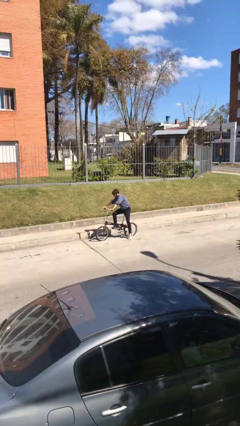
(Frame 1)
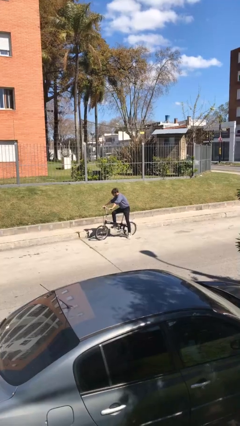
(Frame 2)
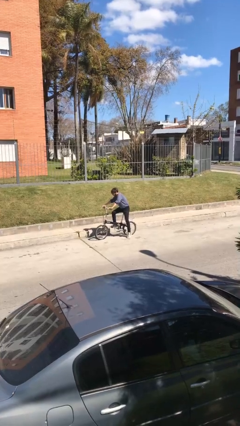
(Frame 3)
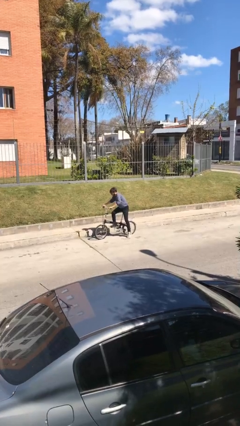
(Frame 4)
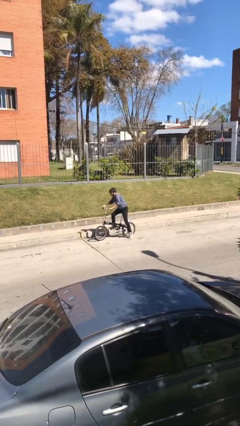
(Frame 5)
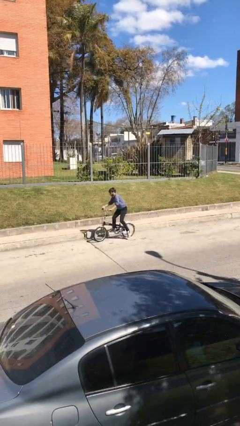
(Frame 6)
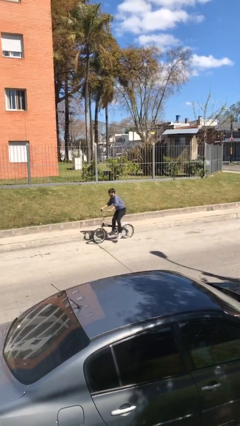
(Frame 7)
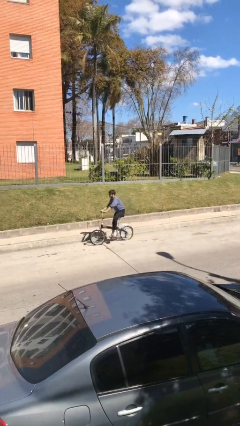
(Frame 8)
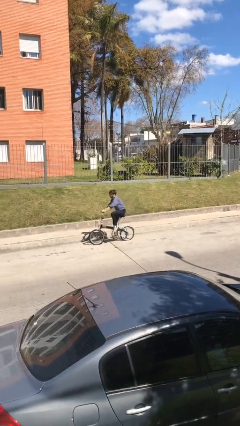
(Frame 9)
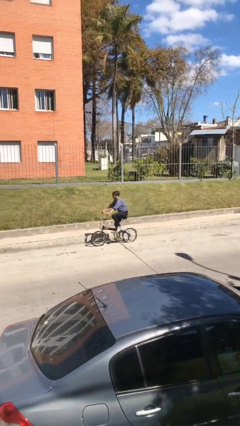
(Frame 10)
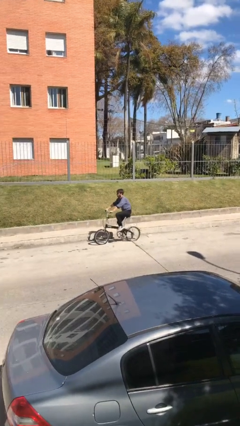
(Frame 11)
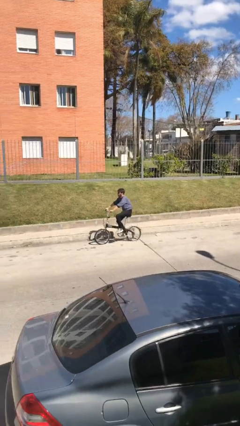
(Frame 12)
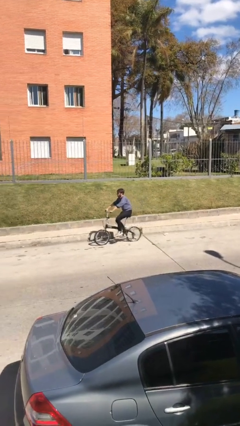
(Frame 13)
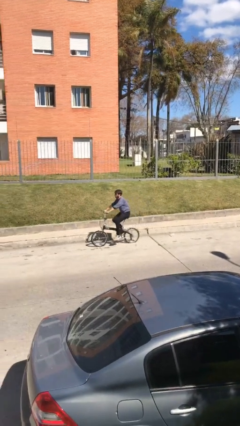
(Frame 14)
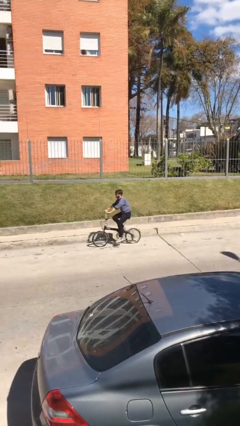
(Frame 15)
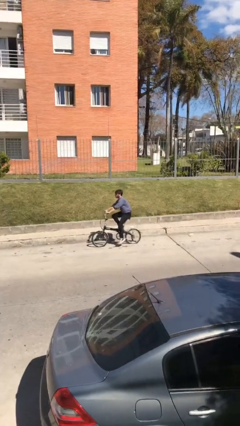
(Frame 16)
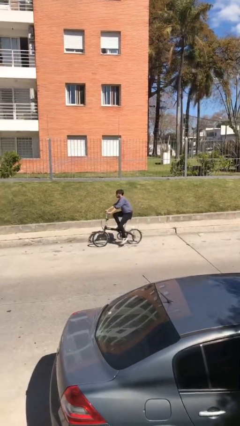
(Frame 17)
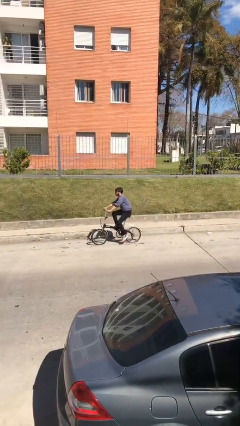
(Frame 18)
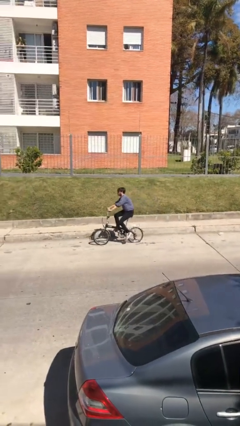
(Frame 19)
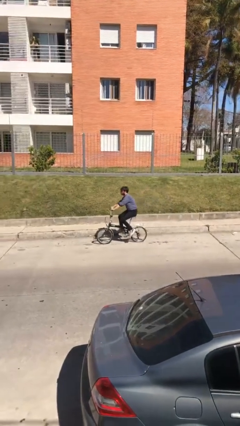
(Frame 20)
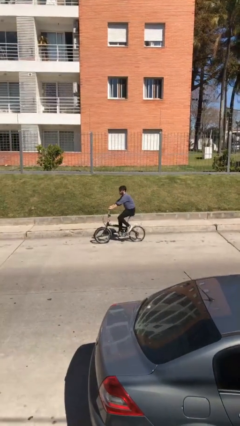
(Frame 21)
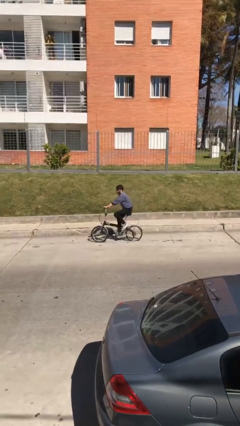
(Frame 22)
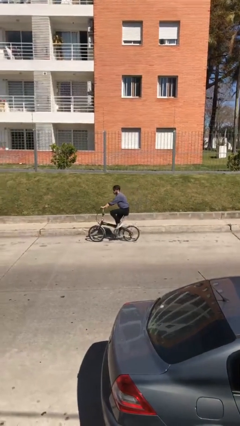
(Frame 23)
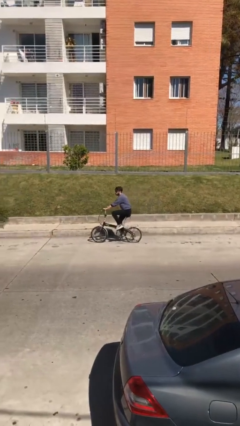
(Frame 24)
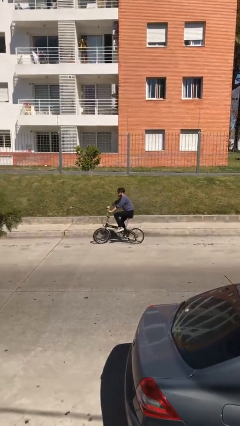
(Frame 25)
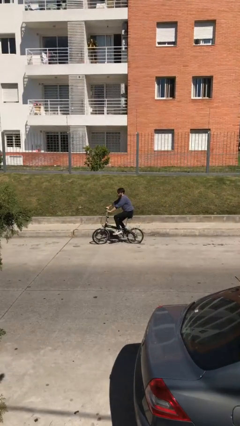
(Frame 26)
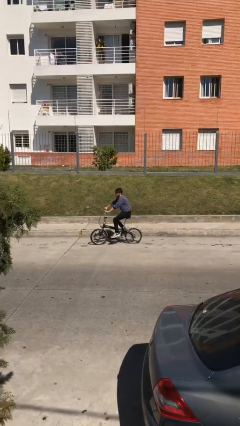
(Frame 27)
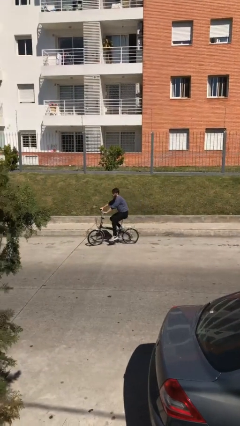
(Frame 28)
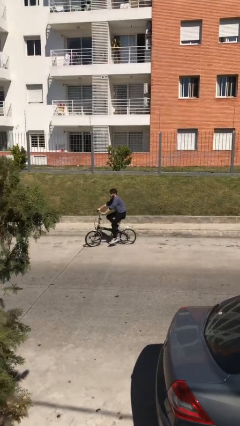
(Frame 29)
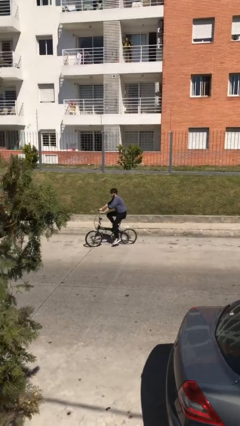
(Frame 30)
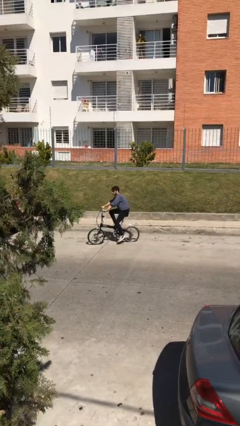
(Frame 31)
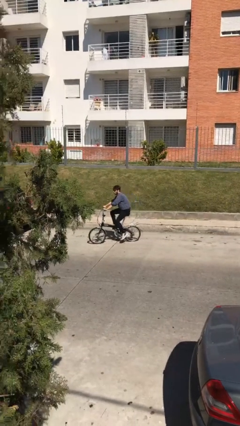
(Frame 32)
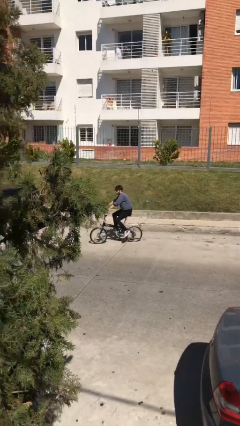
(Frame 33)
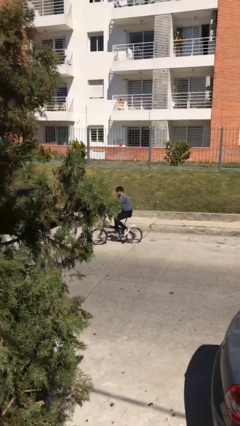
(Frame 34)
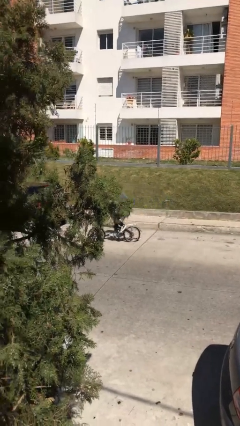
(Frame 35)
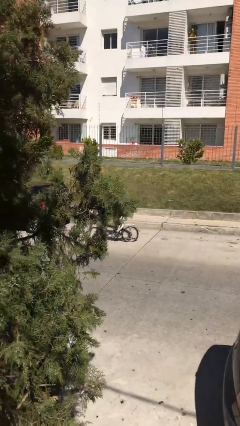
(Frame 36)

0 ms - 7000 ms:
person rides bicycle

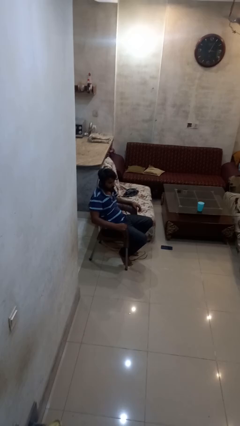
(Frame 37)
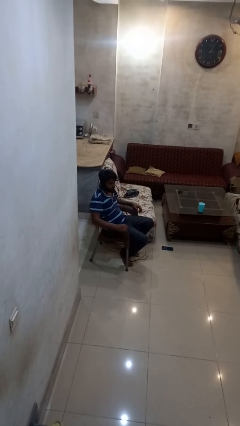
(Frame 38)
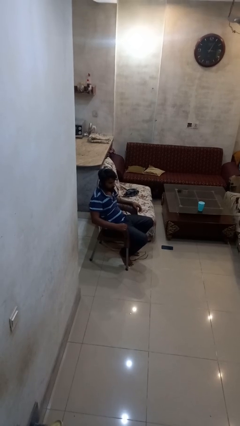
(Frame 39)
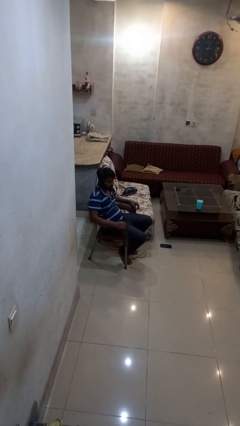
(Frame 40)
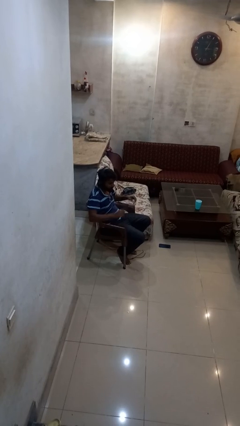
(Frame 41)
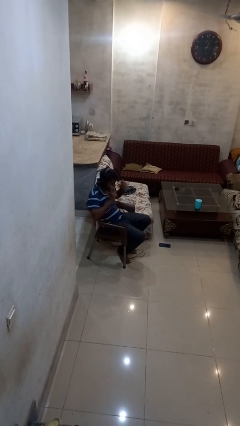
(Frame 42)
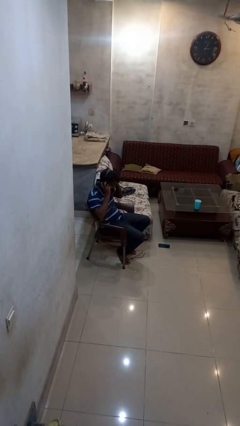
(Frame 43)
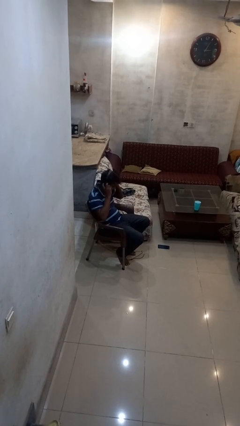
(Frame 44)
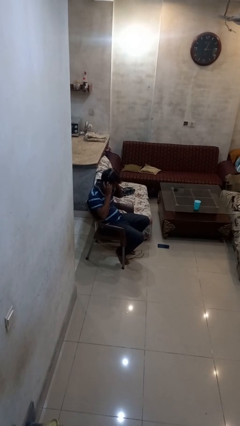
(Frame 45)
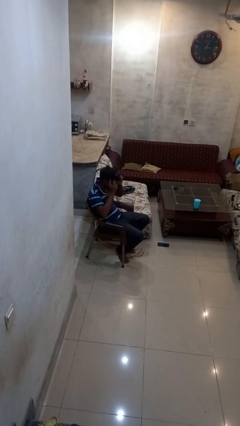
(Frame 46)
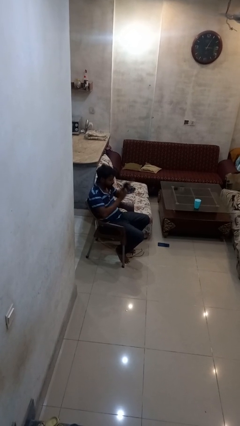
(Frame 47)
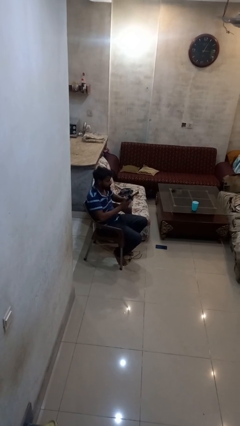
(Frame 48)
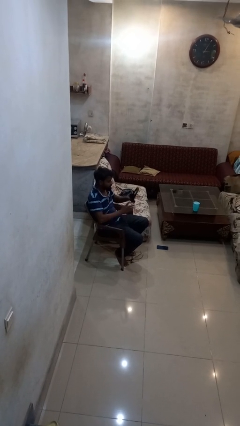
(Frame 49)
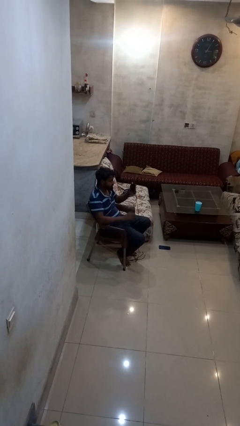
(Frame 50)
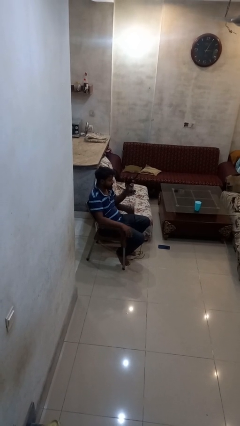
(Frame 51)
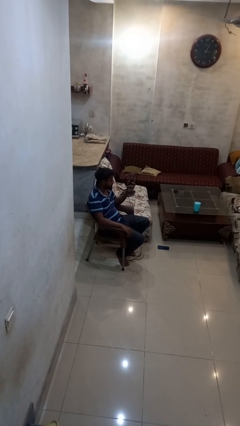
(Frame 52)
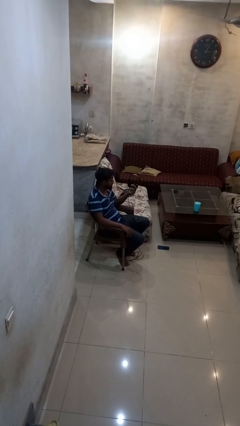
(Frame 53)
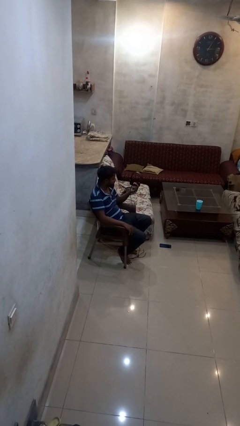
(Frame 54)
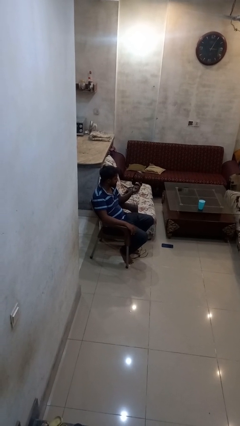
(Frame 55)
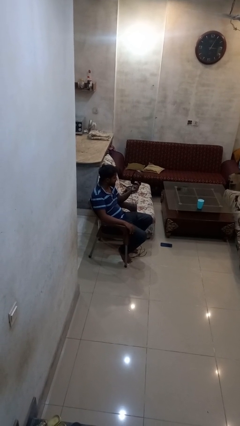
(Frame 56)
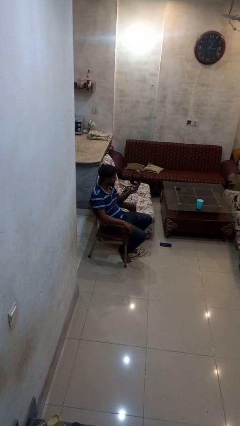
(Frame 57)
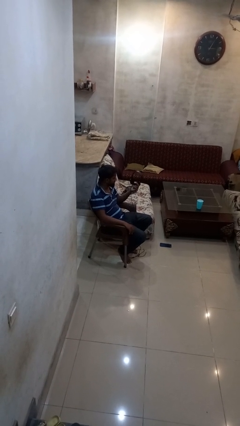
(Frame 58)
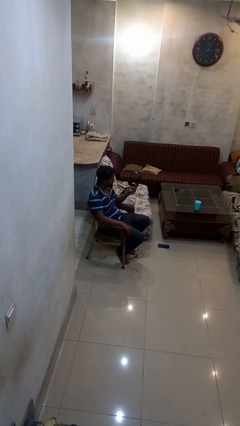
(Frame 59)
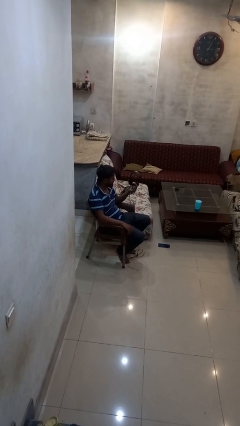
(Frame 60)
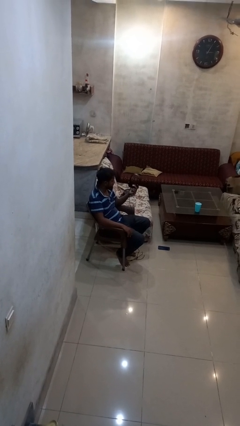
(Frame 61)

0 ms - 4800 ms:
person takes off headphones

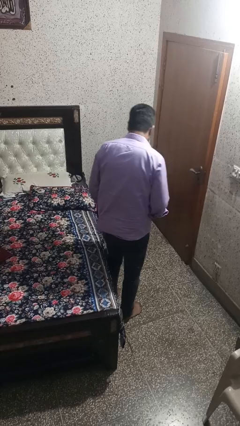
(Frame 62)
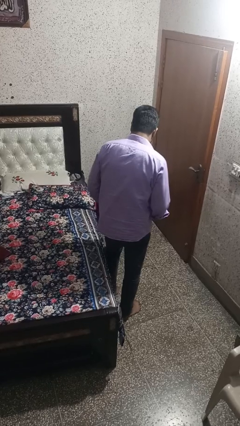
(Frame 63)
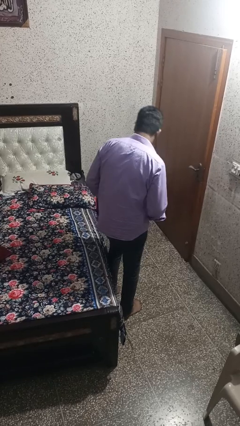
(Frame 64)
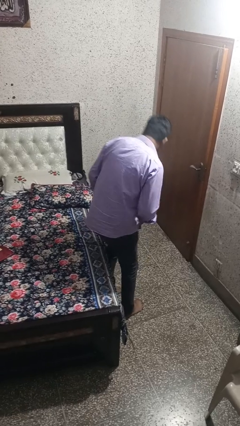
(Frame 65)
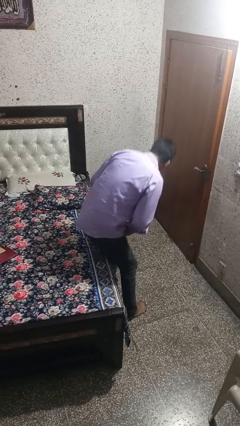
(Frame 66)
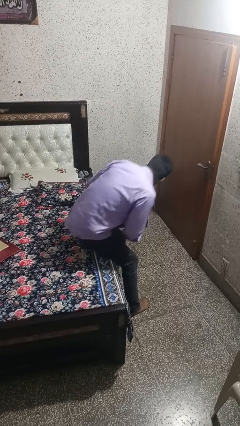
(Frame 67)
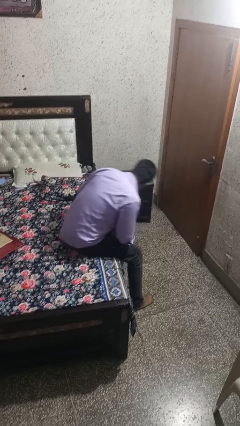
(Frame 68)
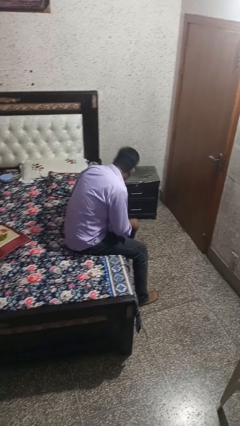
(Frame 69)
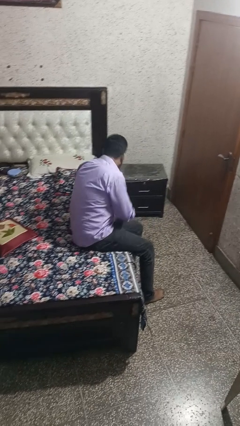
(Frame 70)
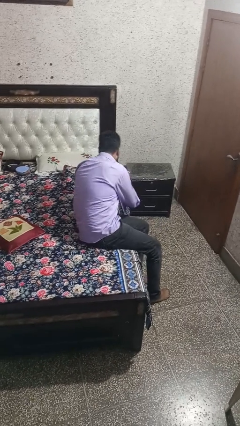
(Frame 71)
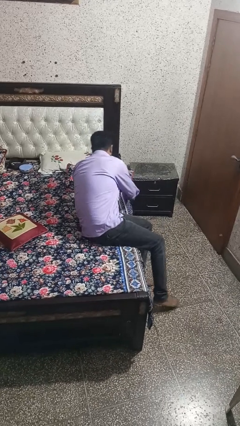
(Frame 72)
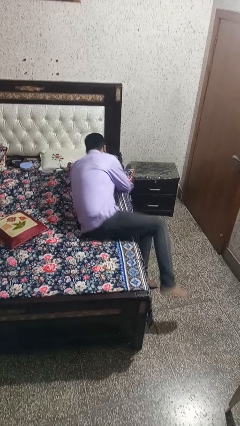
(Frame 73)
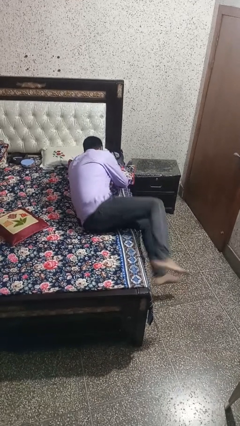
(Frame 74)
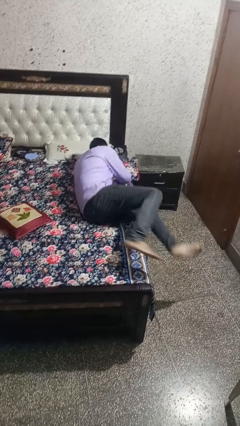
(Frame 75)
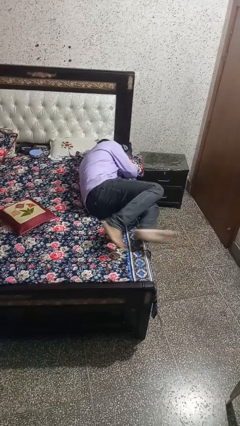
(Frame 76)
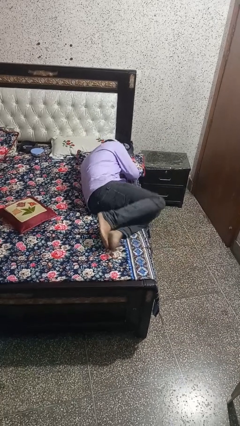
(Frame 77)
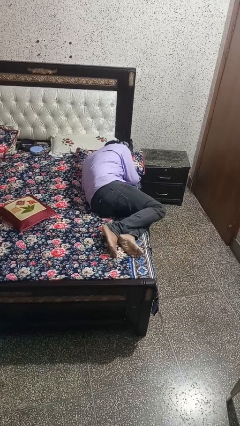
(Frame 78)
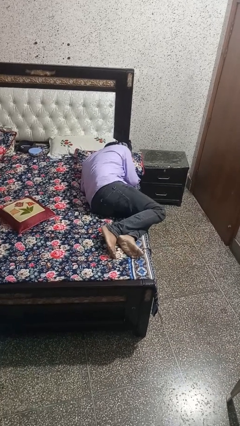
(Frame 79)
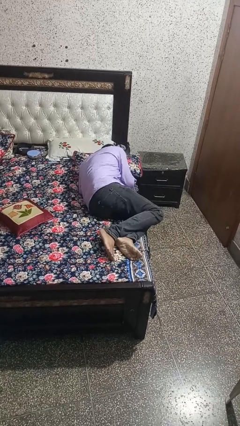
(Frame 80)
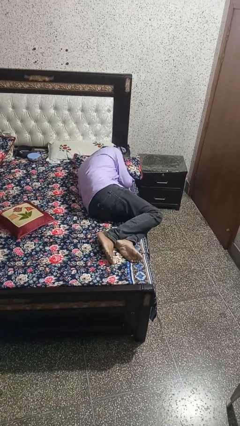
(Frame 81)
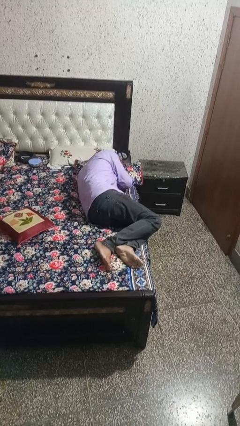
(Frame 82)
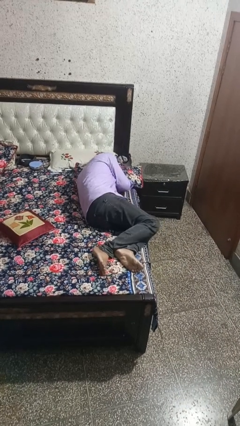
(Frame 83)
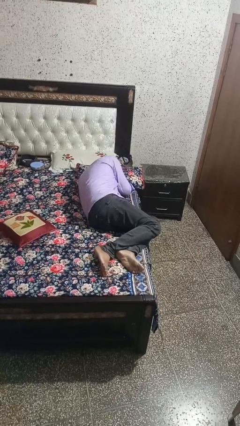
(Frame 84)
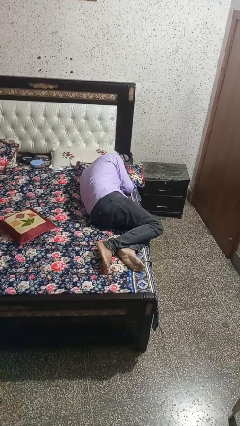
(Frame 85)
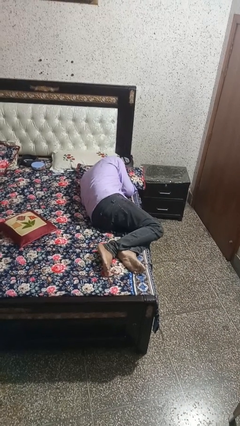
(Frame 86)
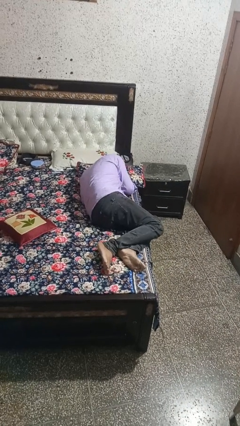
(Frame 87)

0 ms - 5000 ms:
person lies down on bed

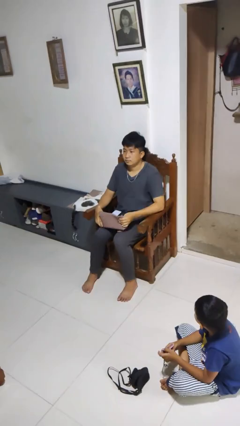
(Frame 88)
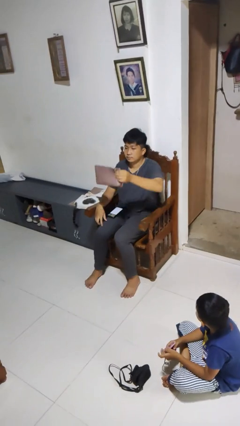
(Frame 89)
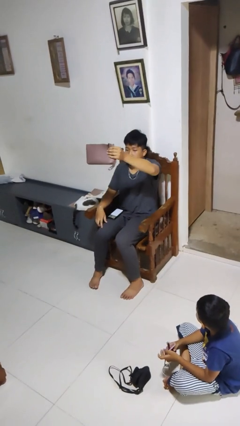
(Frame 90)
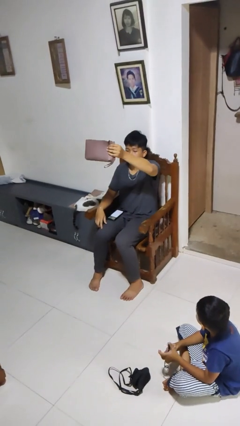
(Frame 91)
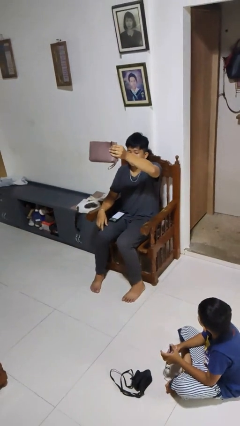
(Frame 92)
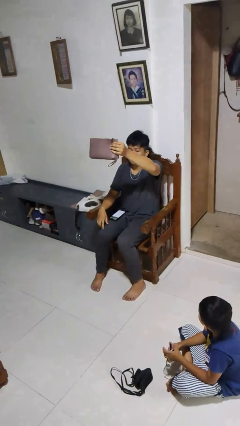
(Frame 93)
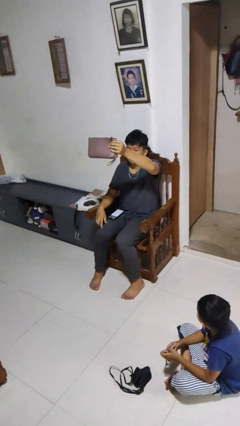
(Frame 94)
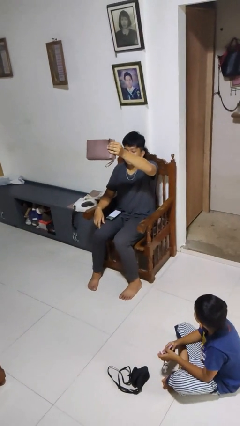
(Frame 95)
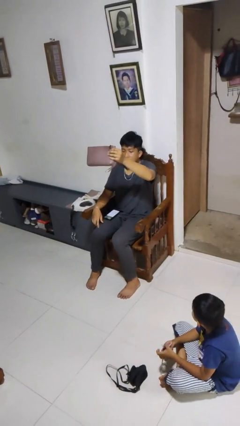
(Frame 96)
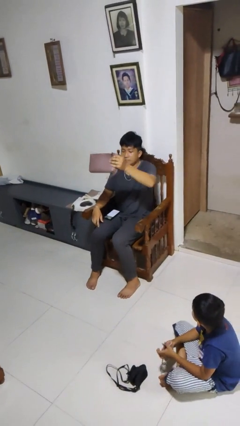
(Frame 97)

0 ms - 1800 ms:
person holds object above head
